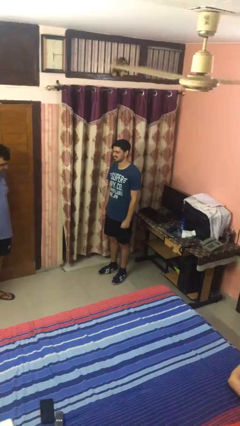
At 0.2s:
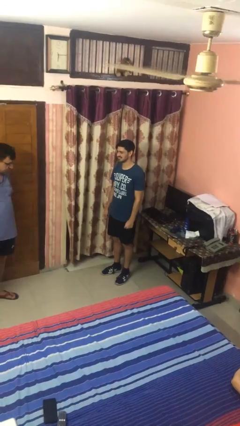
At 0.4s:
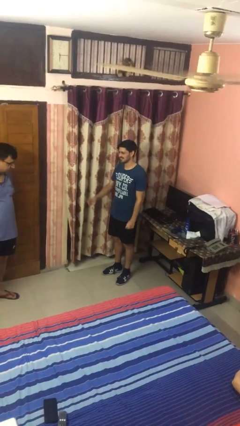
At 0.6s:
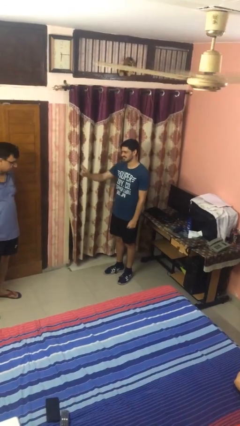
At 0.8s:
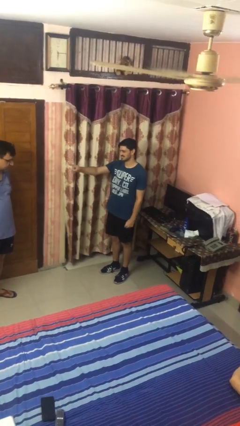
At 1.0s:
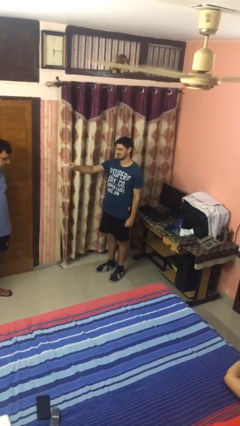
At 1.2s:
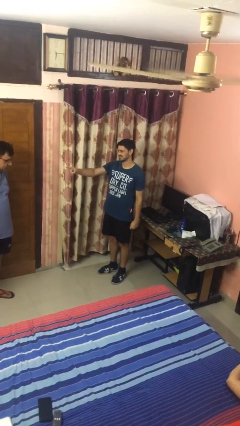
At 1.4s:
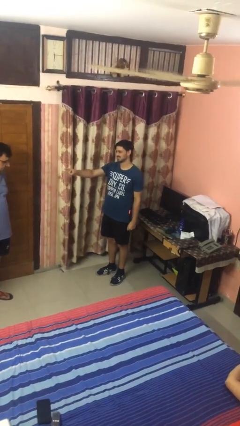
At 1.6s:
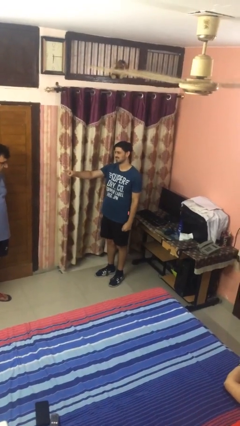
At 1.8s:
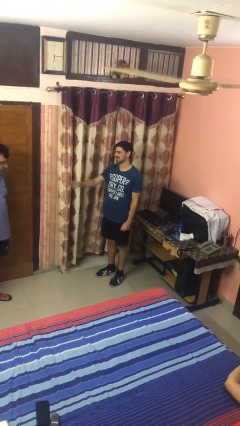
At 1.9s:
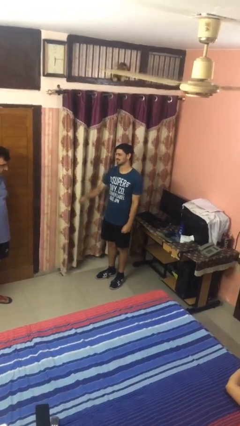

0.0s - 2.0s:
person points at person

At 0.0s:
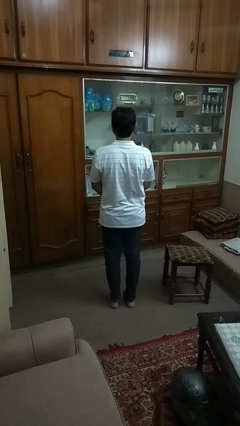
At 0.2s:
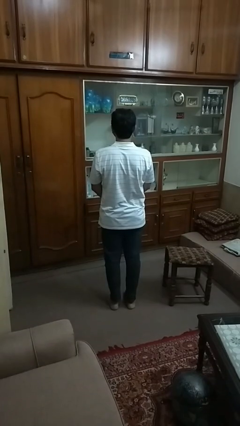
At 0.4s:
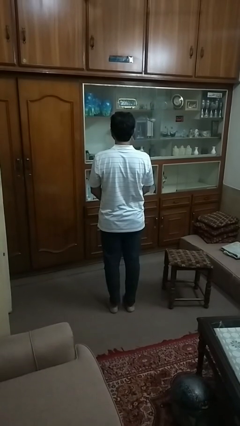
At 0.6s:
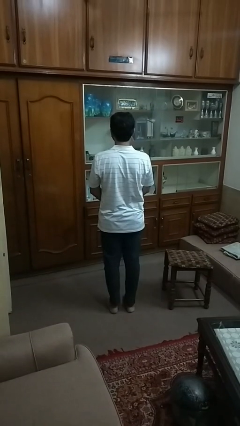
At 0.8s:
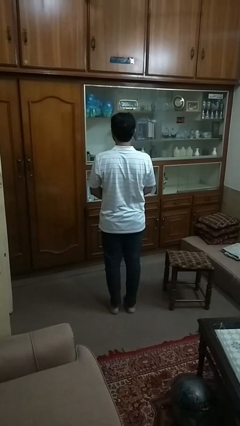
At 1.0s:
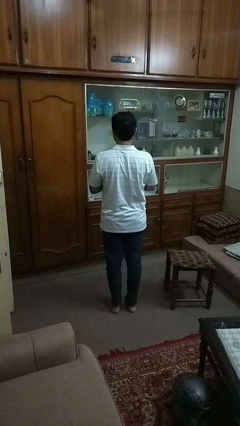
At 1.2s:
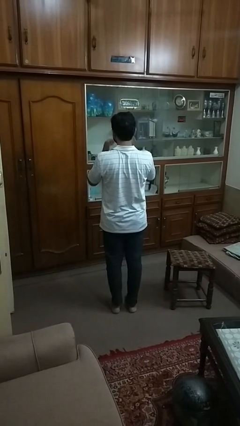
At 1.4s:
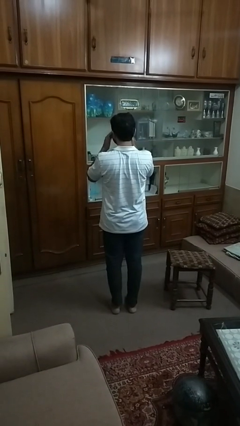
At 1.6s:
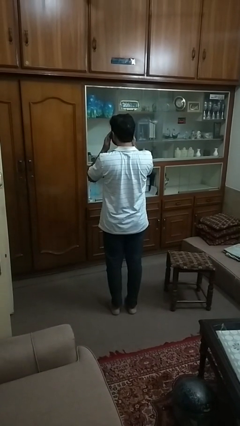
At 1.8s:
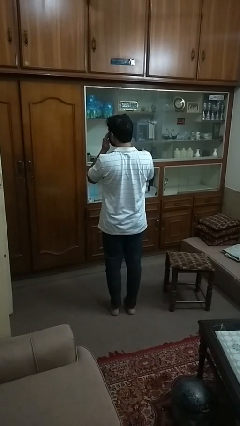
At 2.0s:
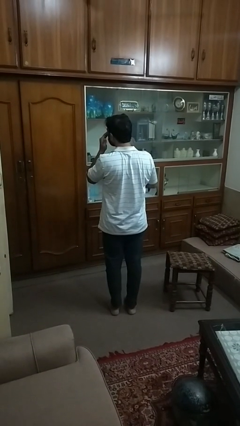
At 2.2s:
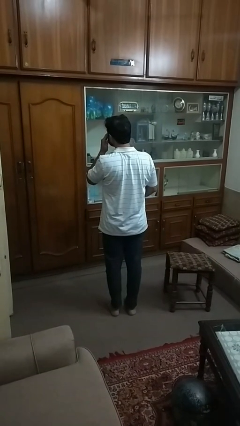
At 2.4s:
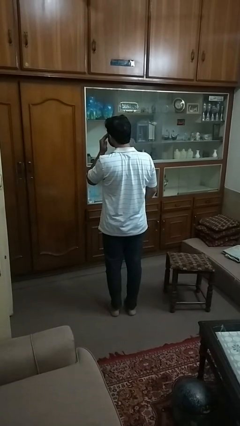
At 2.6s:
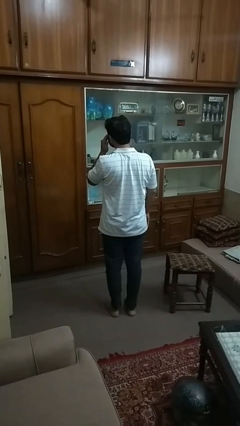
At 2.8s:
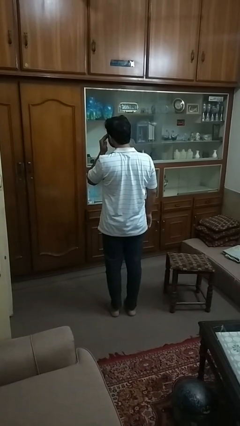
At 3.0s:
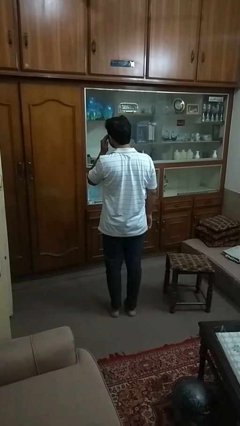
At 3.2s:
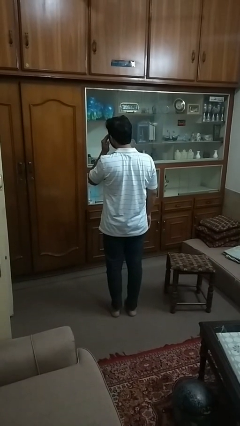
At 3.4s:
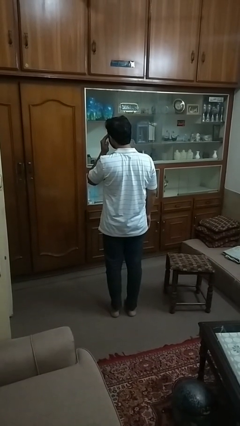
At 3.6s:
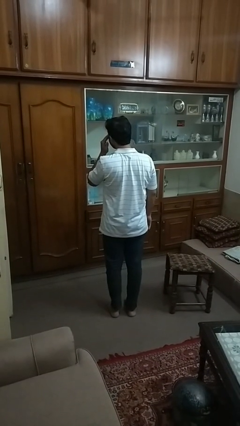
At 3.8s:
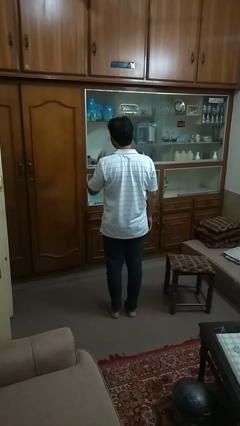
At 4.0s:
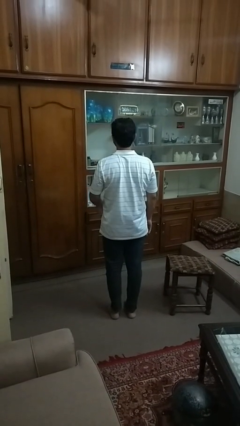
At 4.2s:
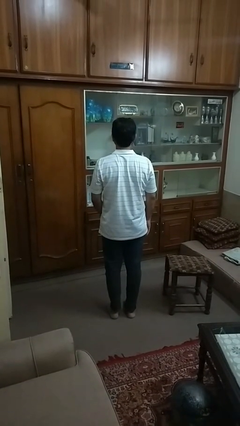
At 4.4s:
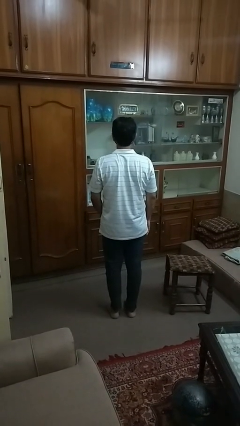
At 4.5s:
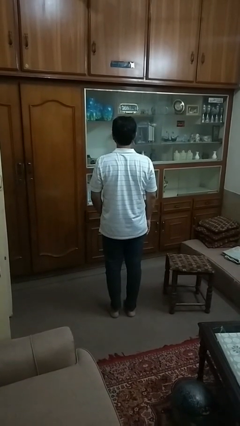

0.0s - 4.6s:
person rubs eyes

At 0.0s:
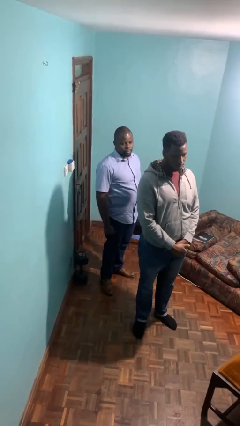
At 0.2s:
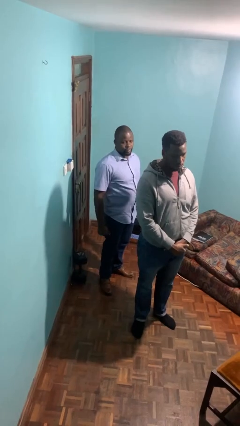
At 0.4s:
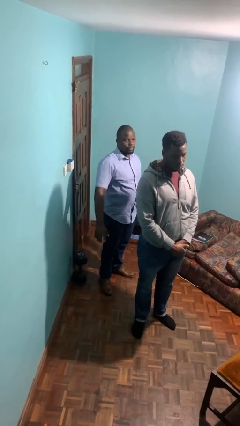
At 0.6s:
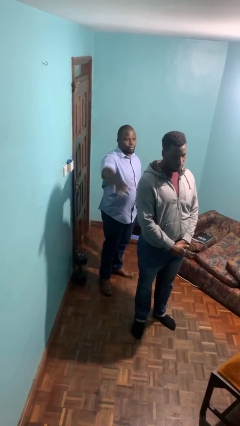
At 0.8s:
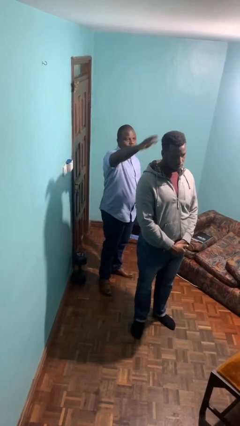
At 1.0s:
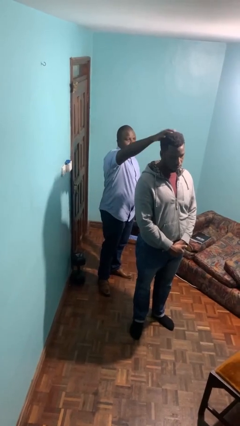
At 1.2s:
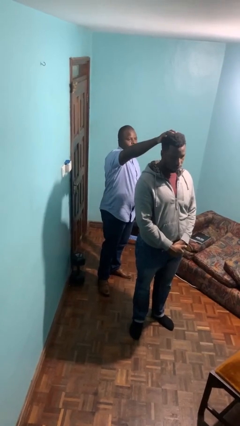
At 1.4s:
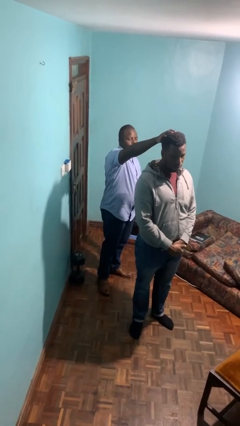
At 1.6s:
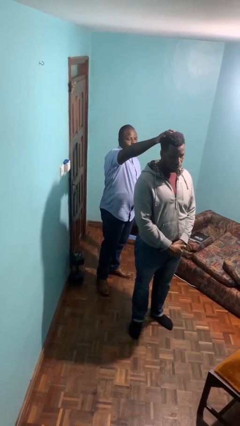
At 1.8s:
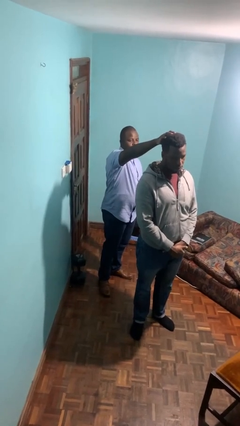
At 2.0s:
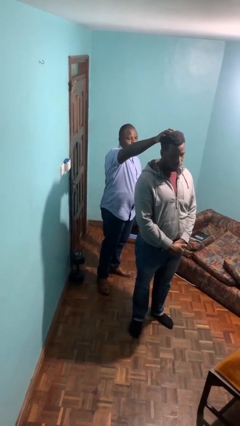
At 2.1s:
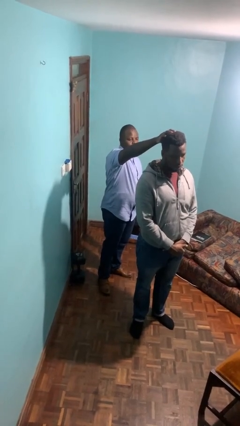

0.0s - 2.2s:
person grabs person by hair

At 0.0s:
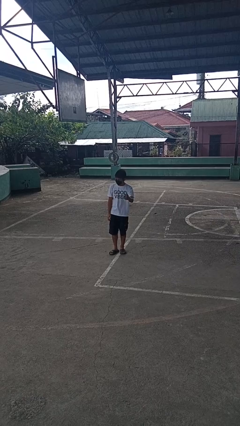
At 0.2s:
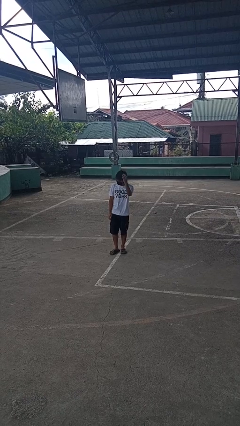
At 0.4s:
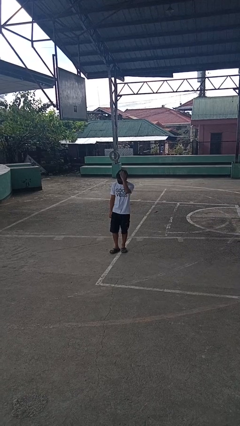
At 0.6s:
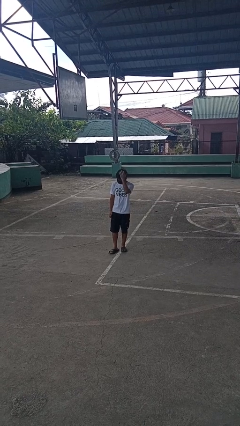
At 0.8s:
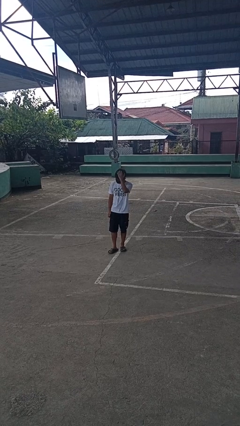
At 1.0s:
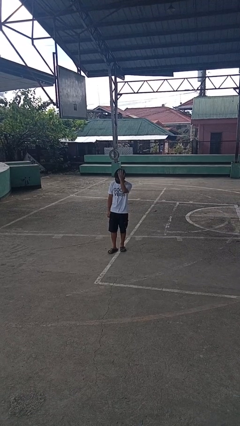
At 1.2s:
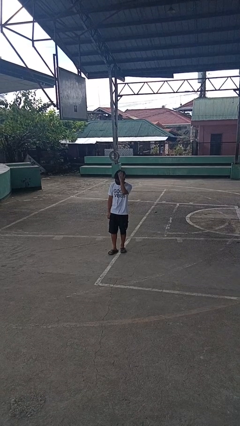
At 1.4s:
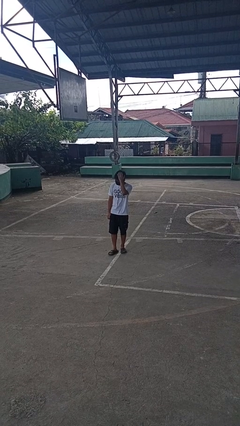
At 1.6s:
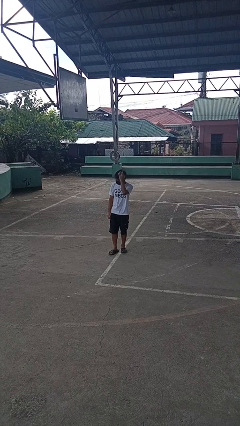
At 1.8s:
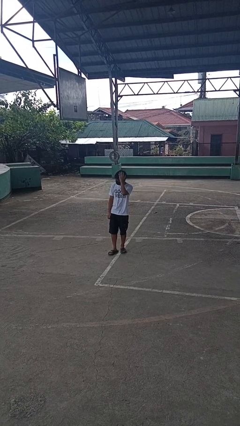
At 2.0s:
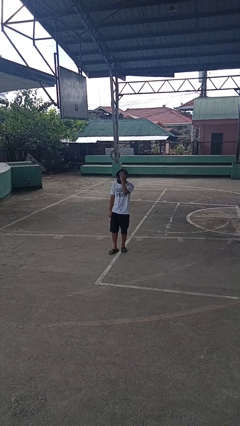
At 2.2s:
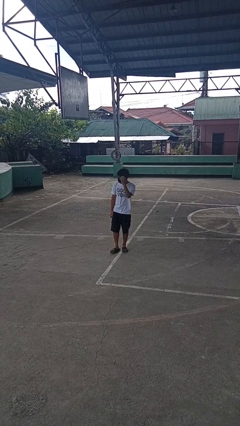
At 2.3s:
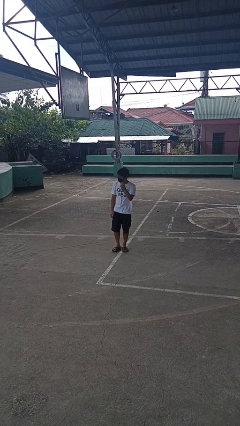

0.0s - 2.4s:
person pats head

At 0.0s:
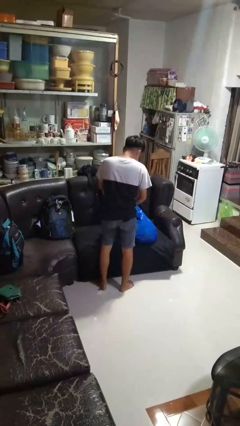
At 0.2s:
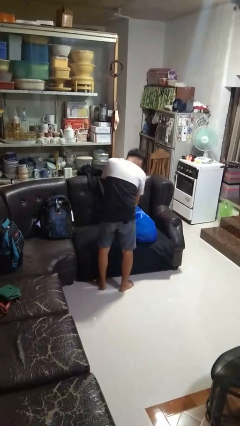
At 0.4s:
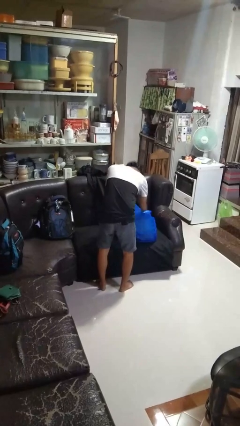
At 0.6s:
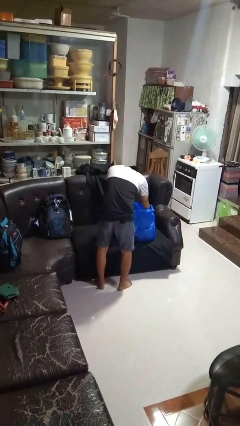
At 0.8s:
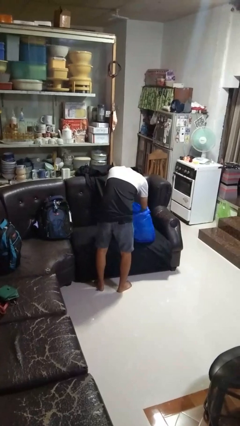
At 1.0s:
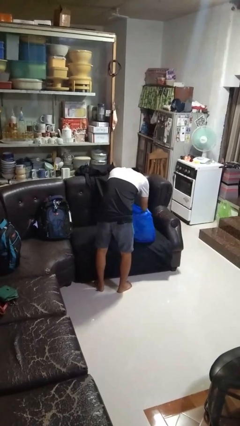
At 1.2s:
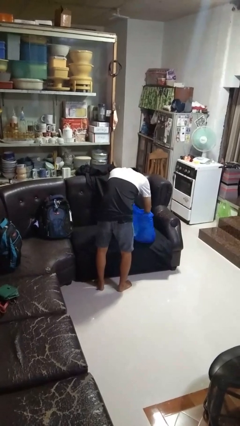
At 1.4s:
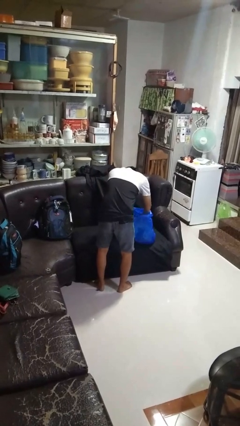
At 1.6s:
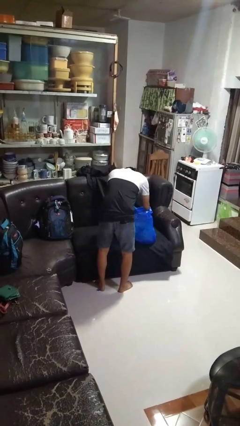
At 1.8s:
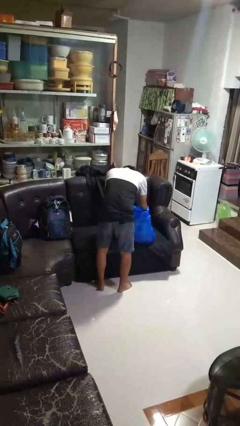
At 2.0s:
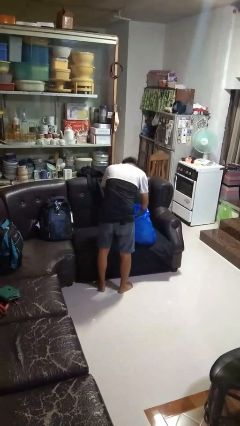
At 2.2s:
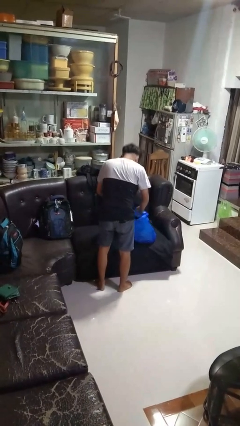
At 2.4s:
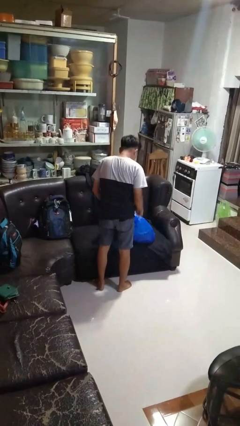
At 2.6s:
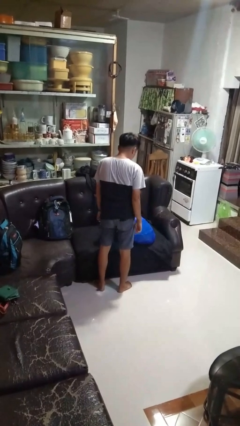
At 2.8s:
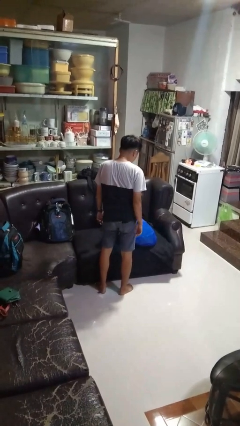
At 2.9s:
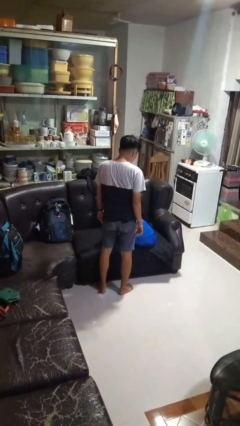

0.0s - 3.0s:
person searches in bag

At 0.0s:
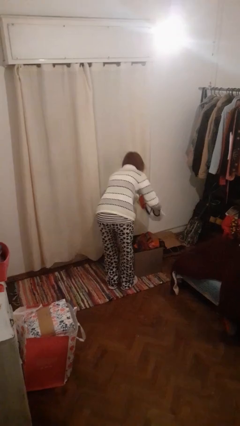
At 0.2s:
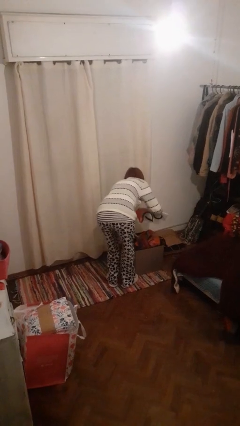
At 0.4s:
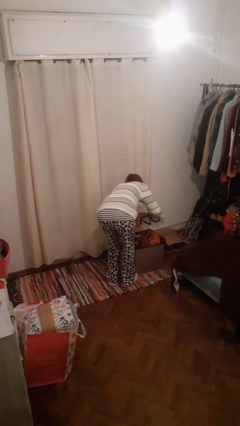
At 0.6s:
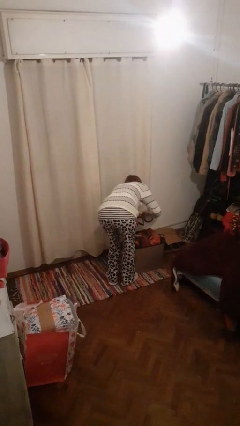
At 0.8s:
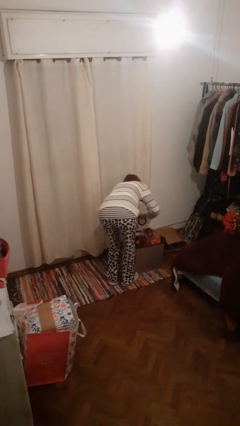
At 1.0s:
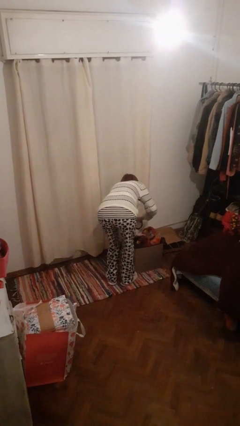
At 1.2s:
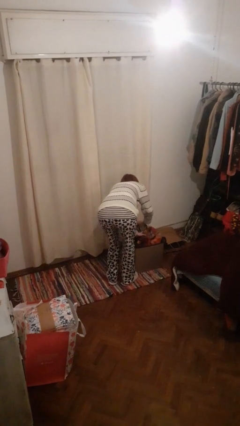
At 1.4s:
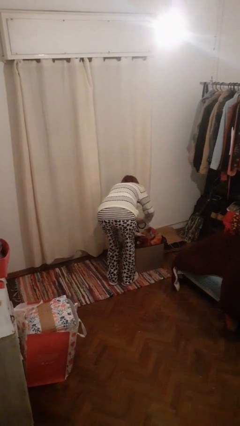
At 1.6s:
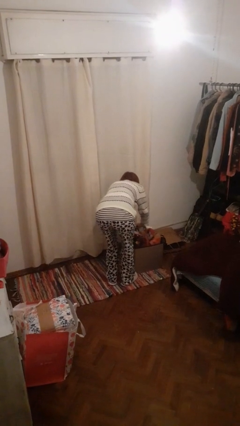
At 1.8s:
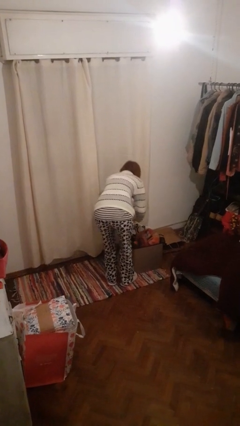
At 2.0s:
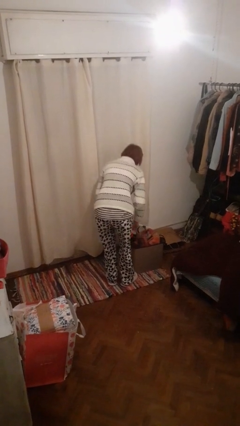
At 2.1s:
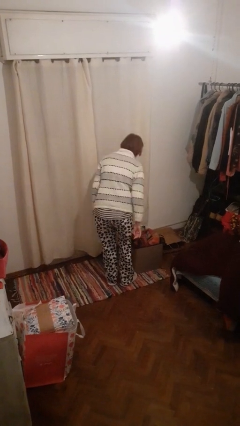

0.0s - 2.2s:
person puts object into basket

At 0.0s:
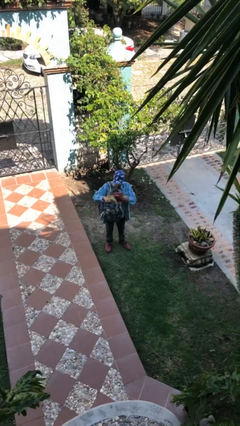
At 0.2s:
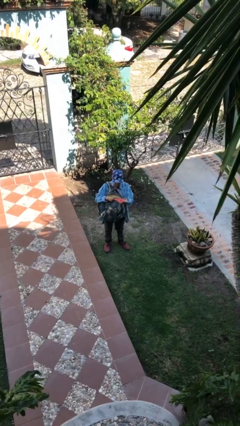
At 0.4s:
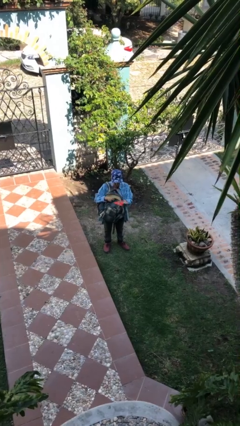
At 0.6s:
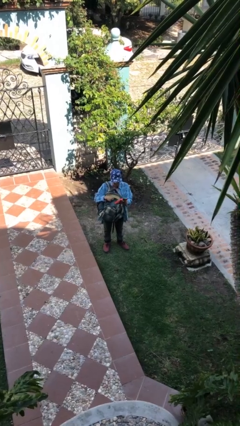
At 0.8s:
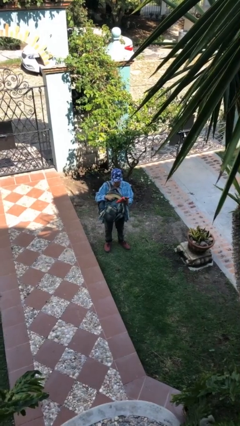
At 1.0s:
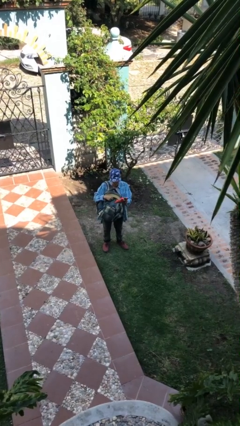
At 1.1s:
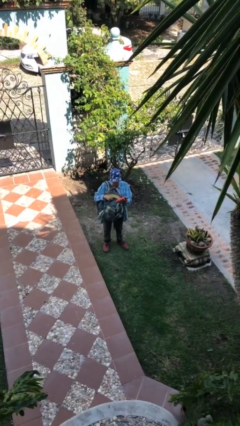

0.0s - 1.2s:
person takes object from backpack
